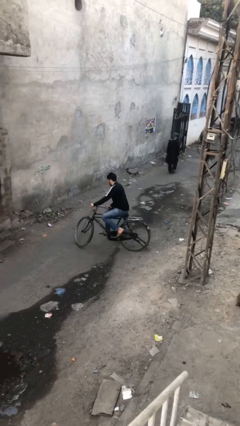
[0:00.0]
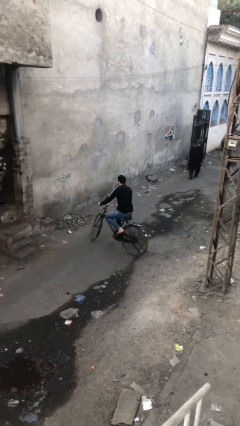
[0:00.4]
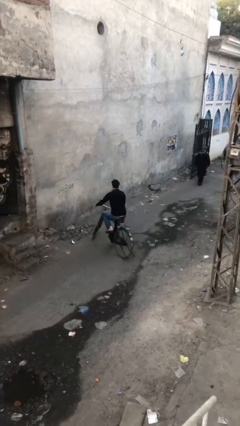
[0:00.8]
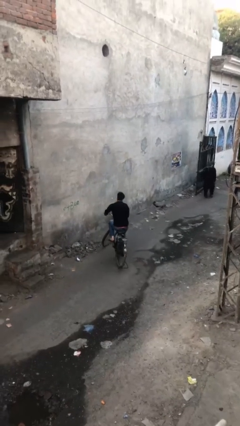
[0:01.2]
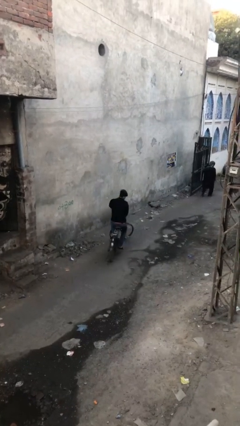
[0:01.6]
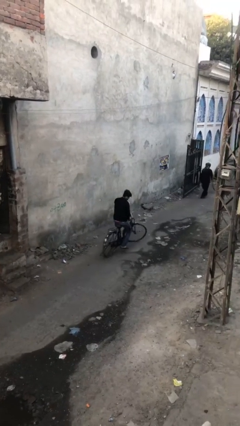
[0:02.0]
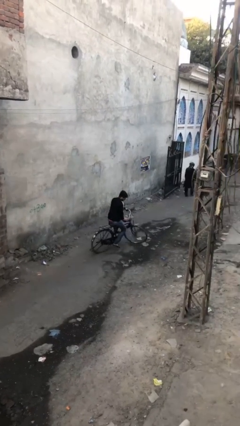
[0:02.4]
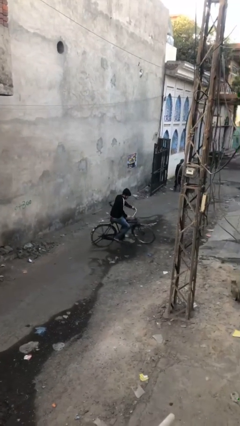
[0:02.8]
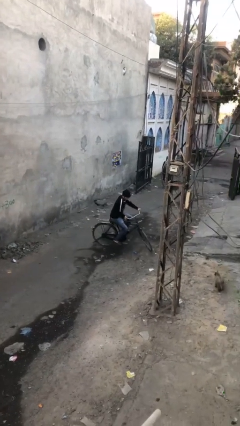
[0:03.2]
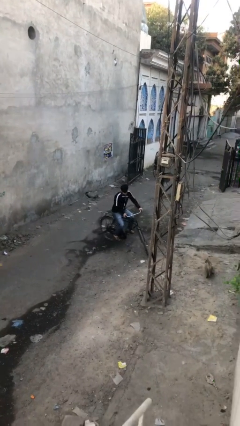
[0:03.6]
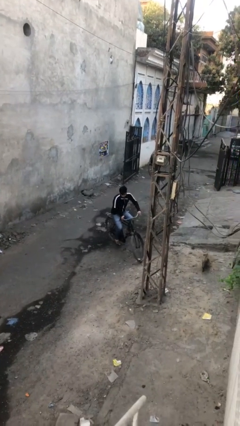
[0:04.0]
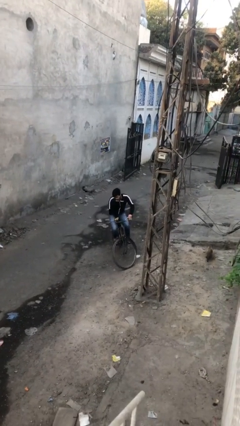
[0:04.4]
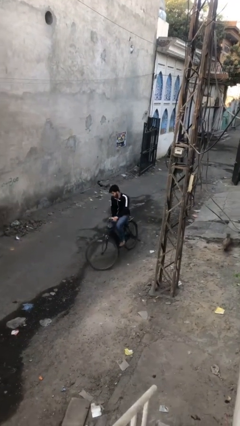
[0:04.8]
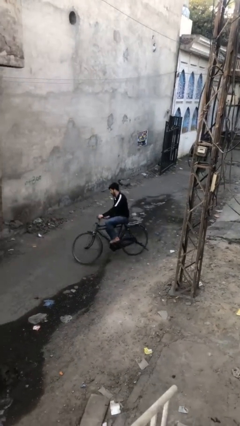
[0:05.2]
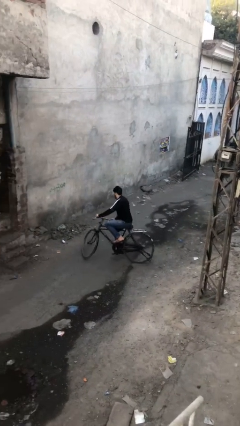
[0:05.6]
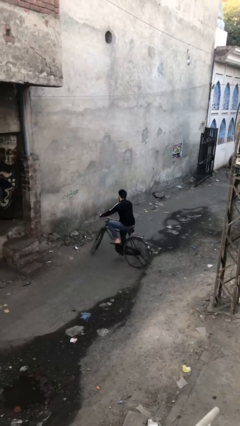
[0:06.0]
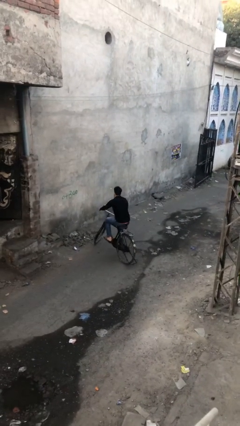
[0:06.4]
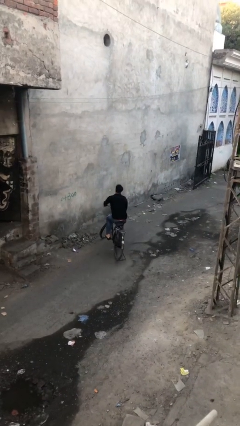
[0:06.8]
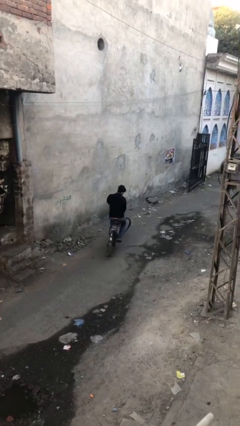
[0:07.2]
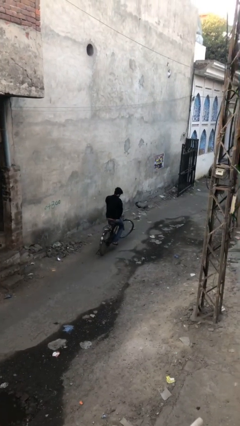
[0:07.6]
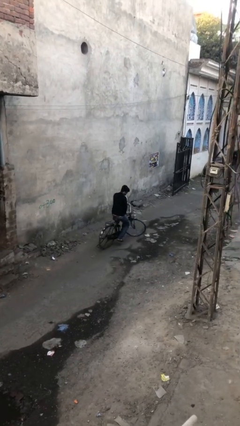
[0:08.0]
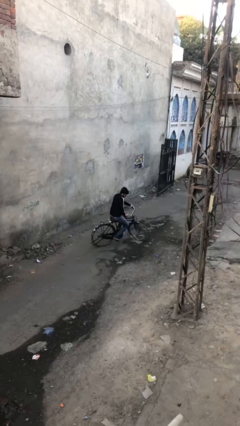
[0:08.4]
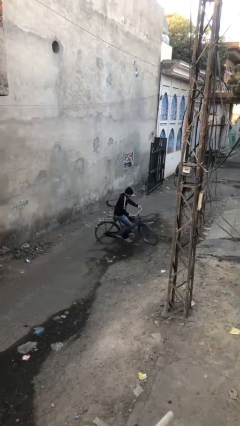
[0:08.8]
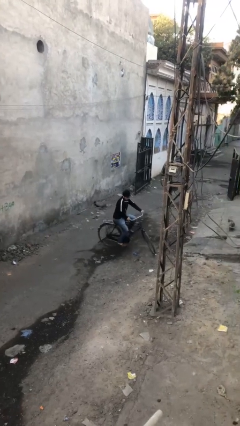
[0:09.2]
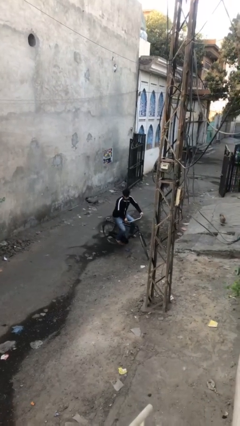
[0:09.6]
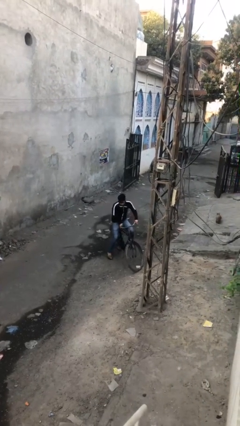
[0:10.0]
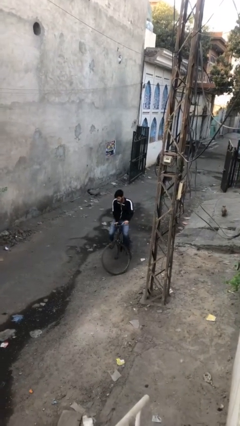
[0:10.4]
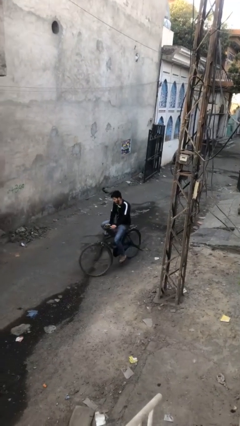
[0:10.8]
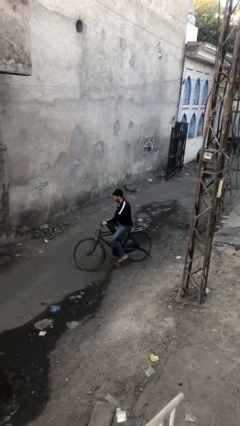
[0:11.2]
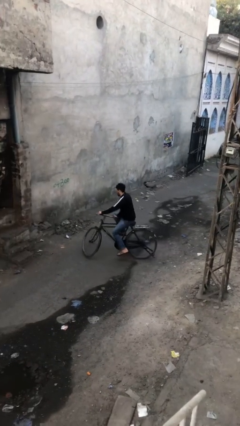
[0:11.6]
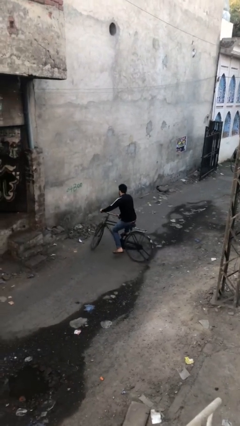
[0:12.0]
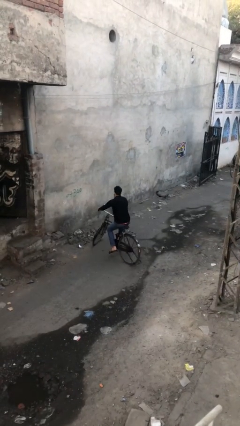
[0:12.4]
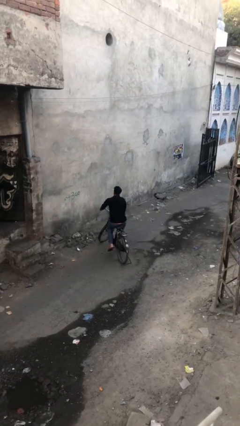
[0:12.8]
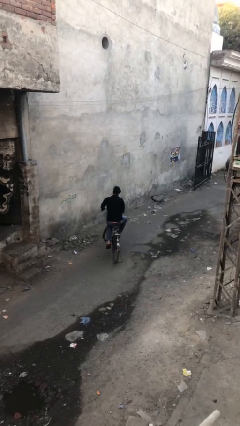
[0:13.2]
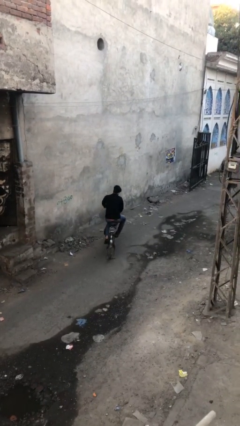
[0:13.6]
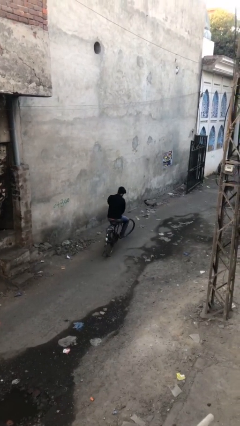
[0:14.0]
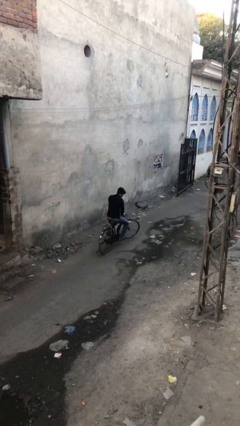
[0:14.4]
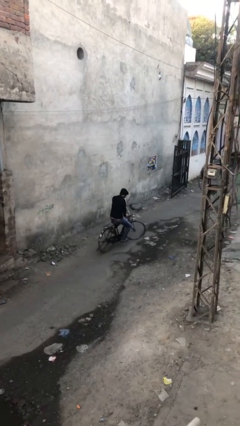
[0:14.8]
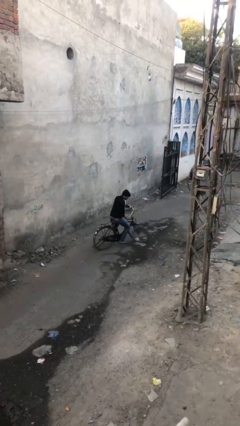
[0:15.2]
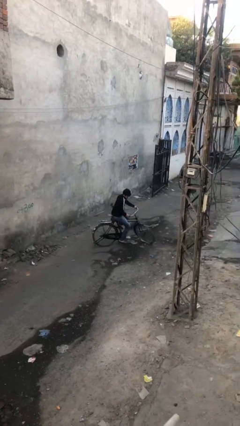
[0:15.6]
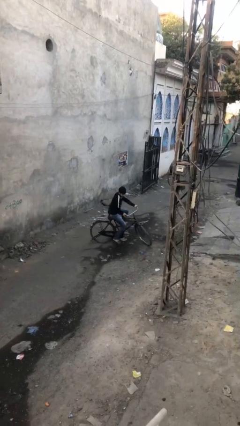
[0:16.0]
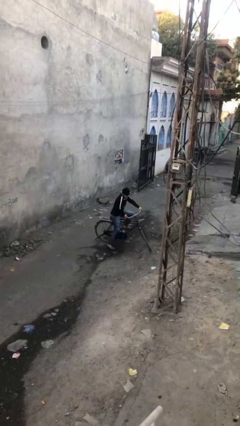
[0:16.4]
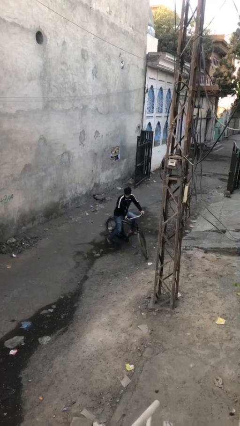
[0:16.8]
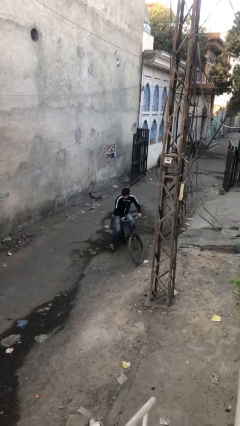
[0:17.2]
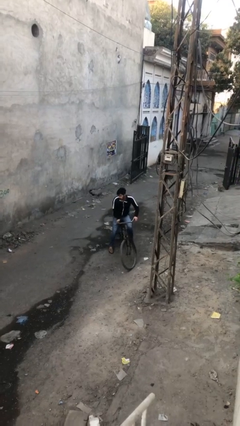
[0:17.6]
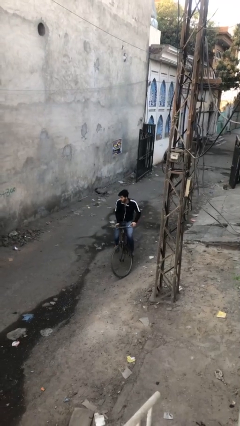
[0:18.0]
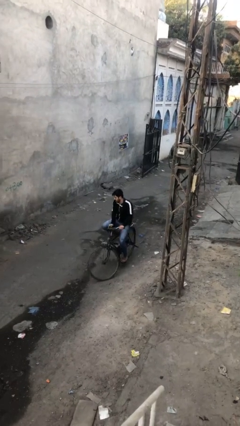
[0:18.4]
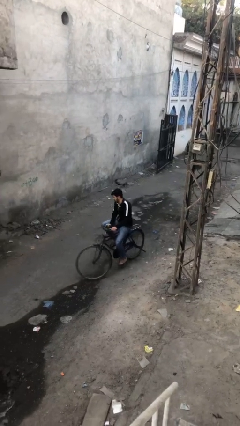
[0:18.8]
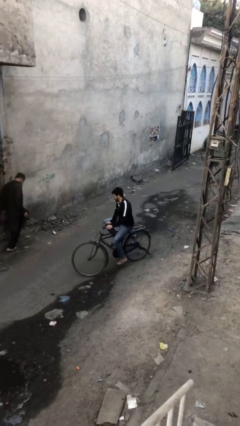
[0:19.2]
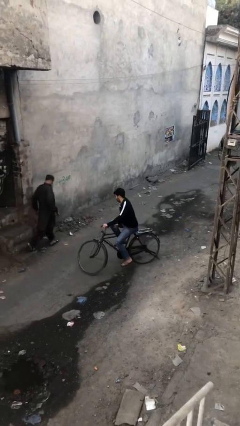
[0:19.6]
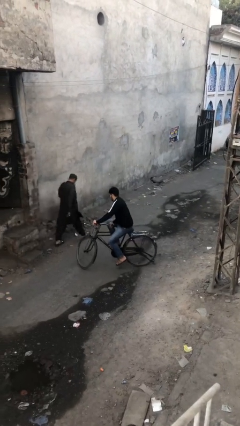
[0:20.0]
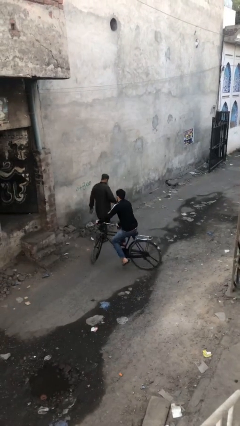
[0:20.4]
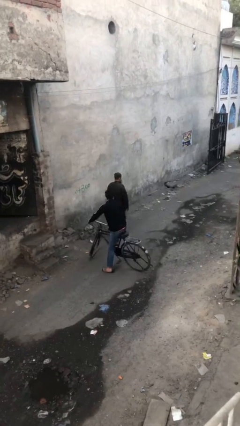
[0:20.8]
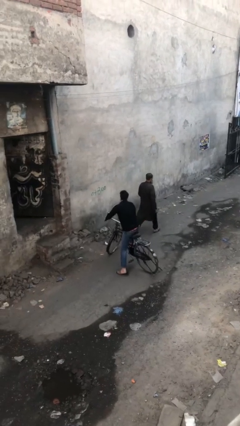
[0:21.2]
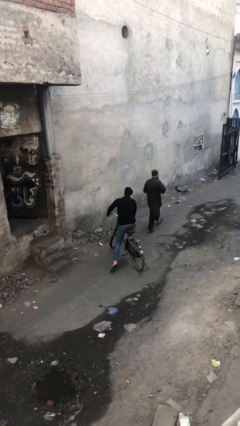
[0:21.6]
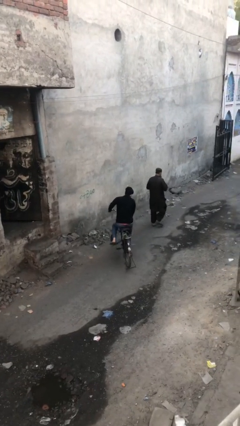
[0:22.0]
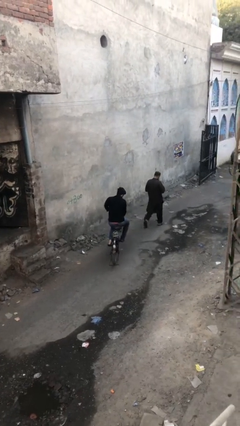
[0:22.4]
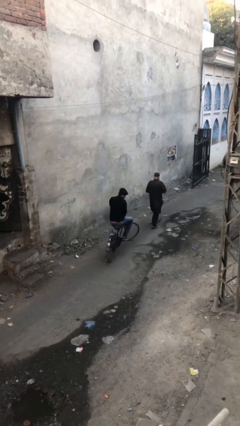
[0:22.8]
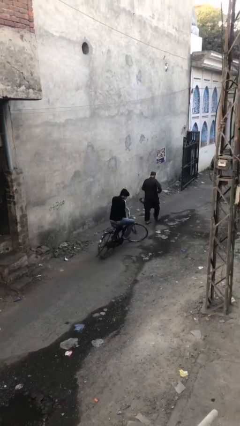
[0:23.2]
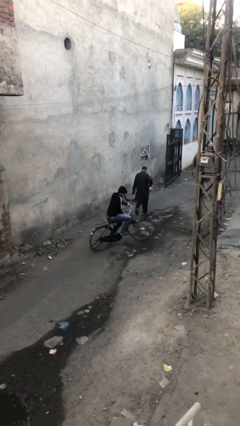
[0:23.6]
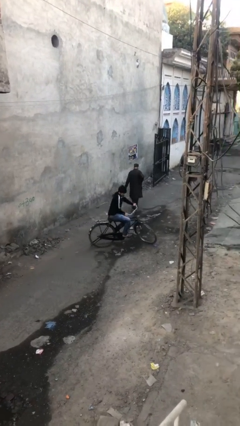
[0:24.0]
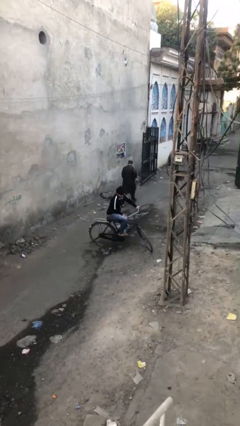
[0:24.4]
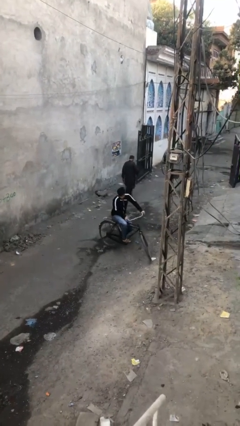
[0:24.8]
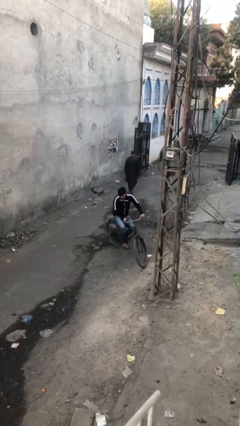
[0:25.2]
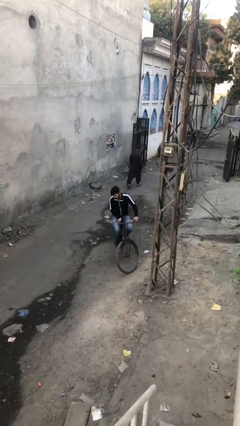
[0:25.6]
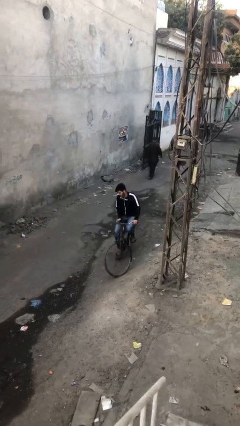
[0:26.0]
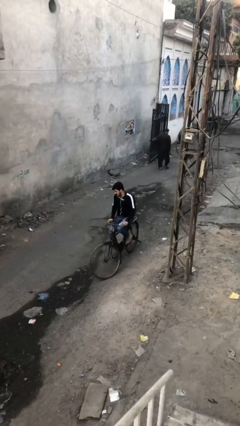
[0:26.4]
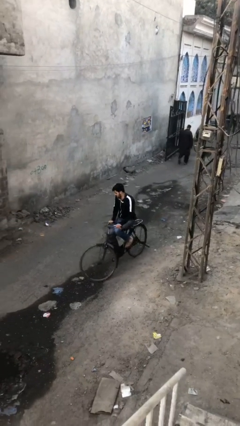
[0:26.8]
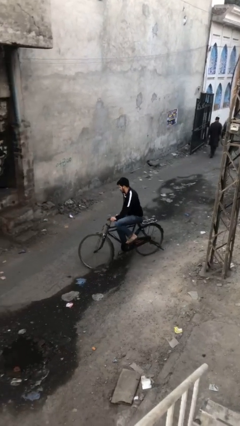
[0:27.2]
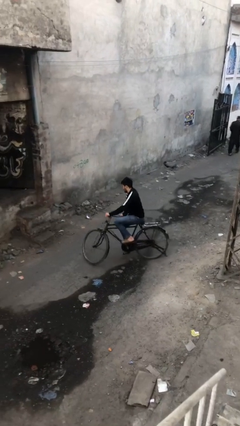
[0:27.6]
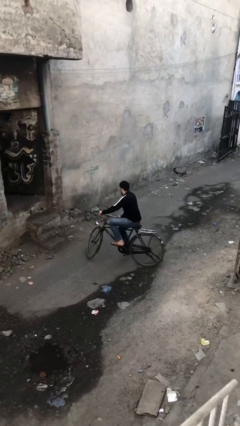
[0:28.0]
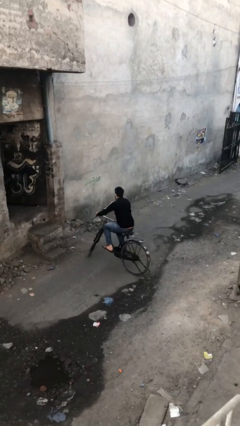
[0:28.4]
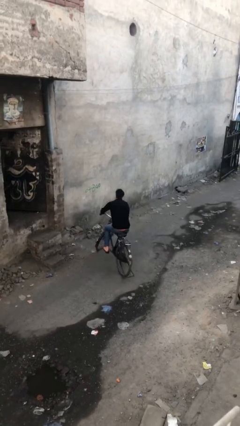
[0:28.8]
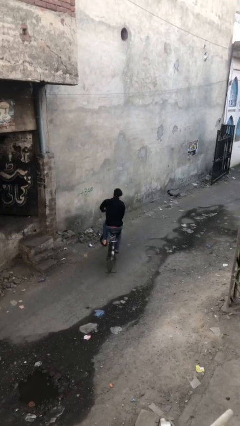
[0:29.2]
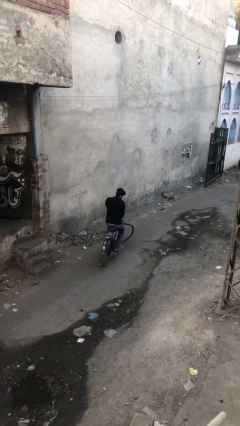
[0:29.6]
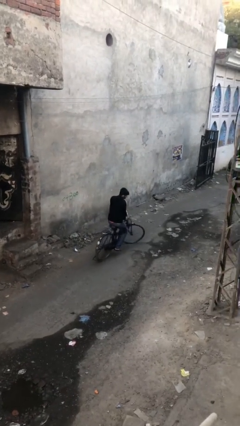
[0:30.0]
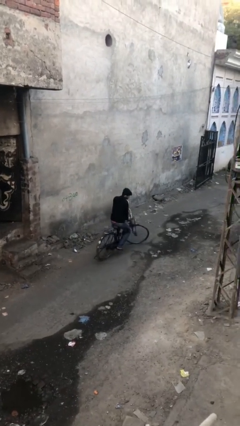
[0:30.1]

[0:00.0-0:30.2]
person rides bicycle

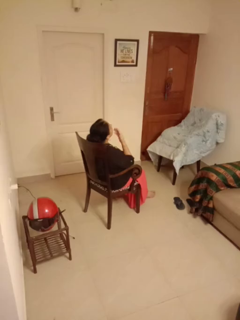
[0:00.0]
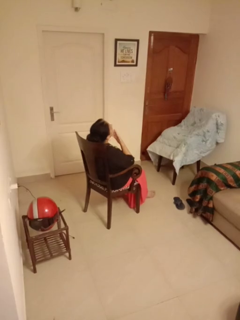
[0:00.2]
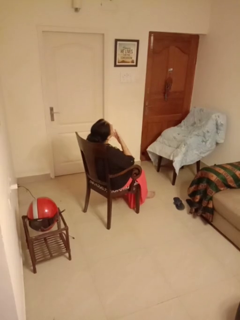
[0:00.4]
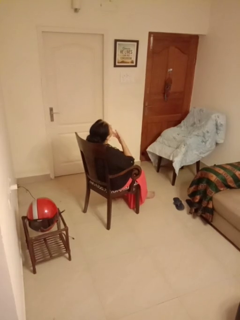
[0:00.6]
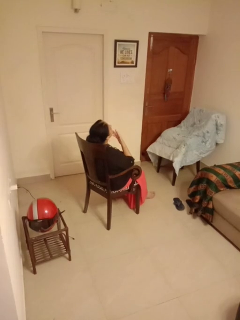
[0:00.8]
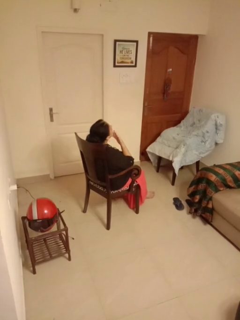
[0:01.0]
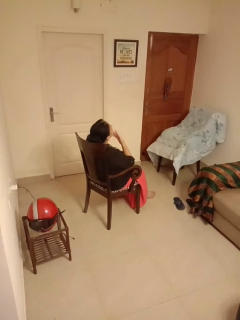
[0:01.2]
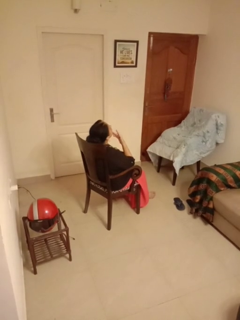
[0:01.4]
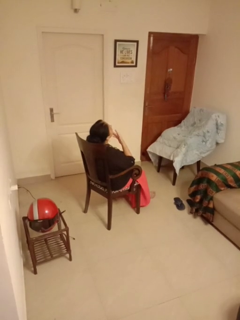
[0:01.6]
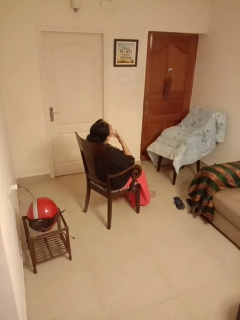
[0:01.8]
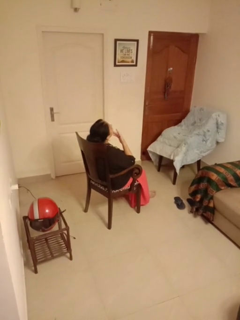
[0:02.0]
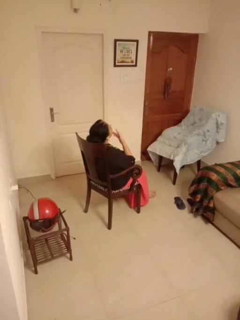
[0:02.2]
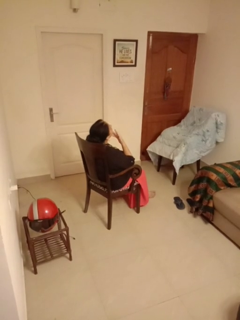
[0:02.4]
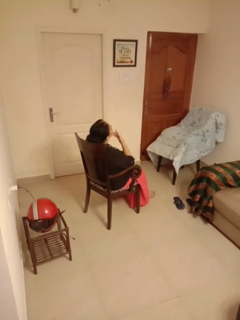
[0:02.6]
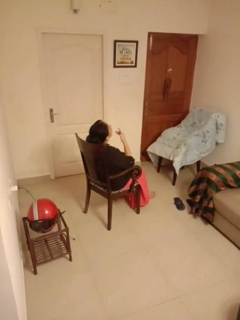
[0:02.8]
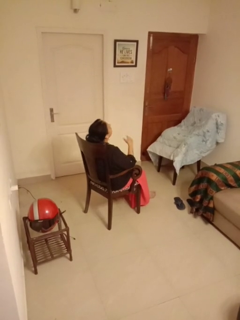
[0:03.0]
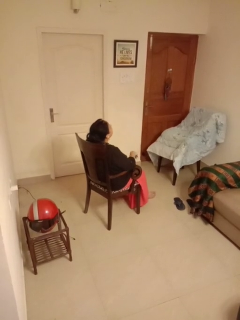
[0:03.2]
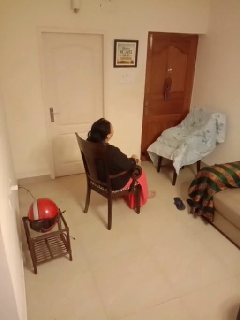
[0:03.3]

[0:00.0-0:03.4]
person strokes chin
